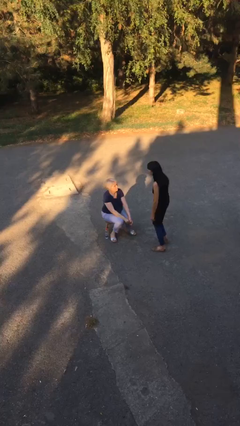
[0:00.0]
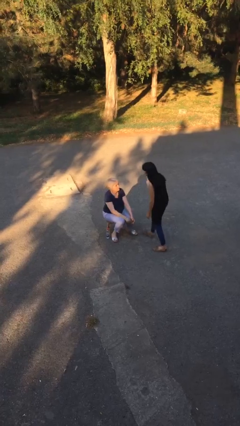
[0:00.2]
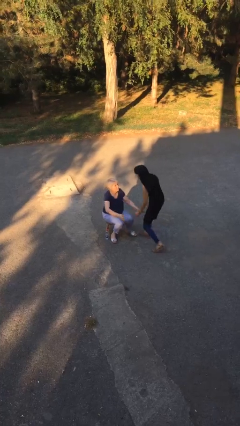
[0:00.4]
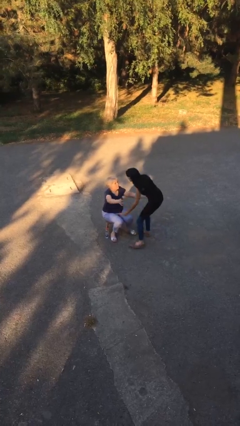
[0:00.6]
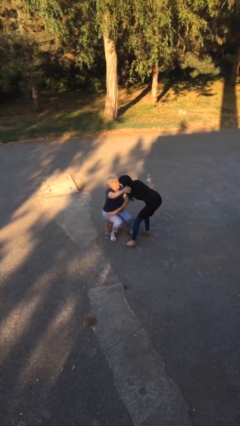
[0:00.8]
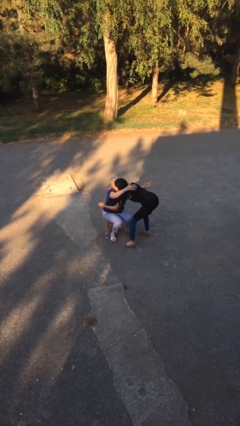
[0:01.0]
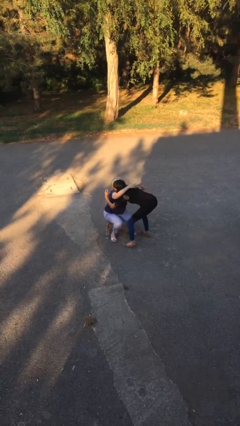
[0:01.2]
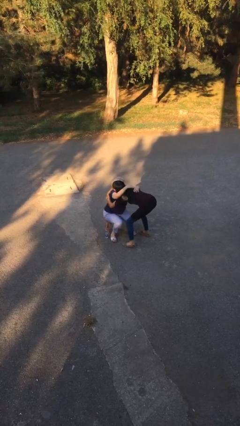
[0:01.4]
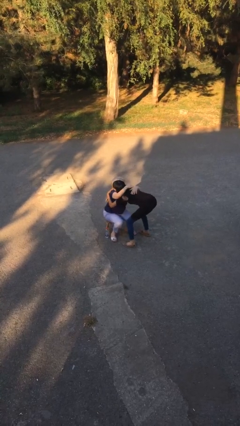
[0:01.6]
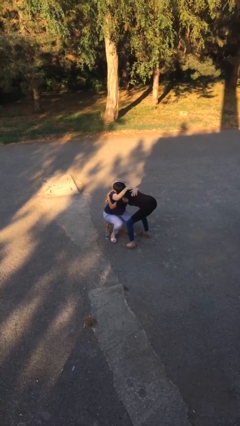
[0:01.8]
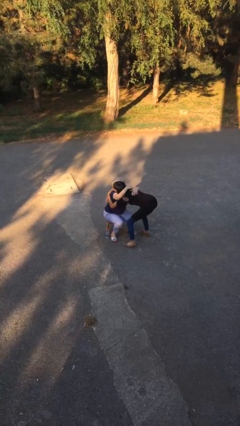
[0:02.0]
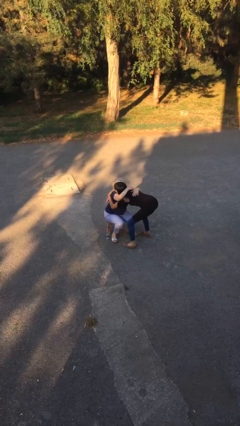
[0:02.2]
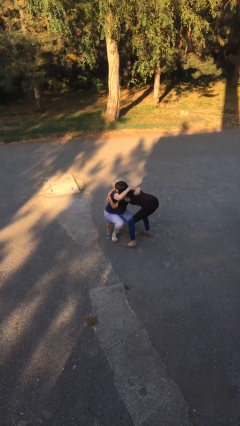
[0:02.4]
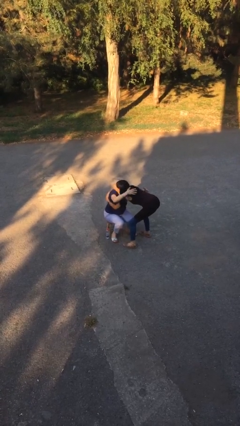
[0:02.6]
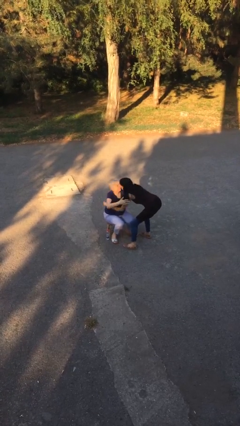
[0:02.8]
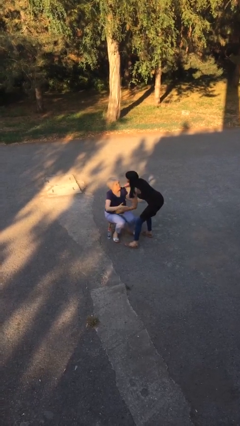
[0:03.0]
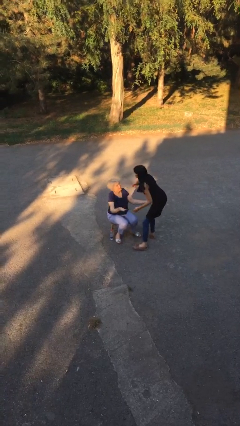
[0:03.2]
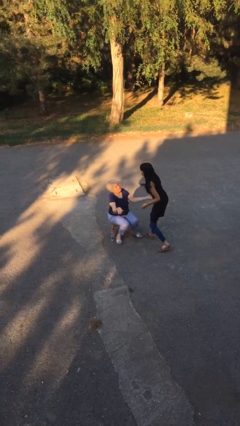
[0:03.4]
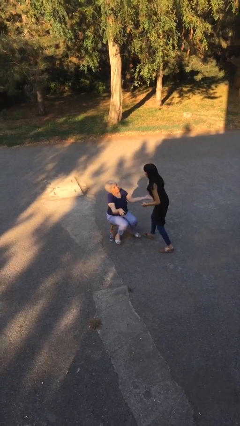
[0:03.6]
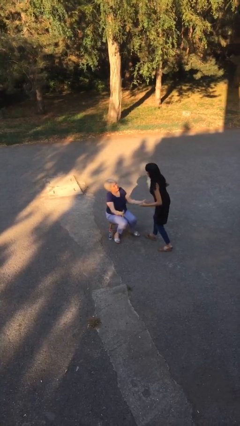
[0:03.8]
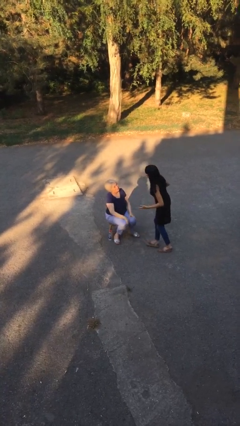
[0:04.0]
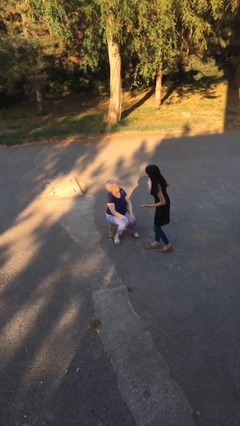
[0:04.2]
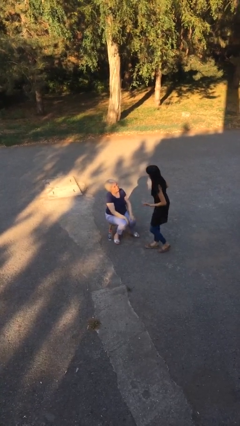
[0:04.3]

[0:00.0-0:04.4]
person embraces person

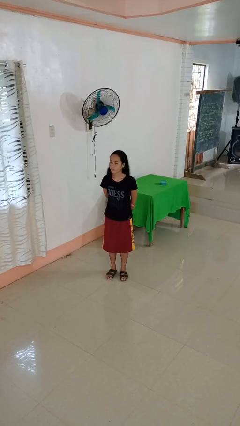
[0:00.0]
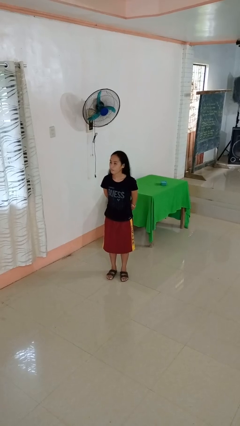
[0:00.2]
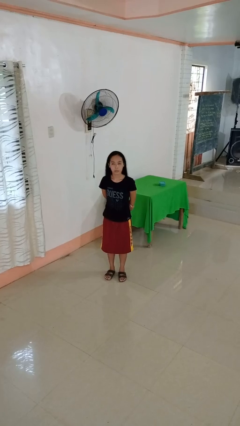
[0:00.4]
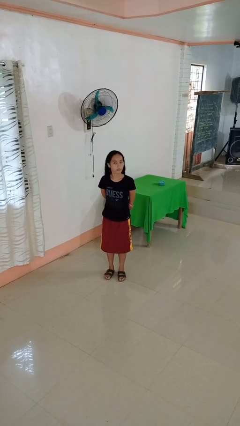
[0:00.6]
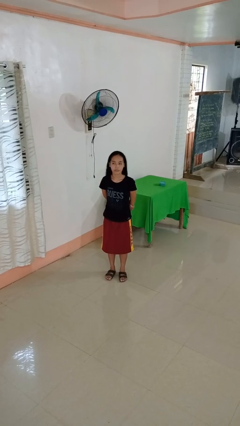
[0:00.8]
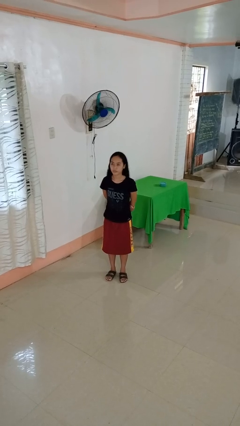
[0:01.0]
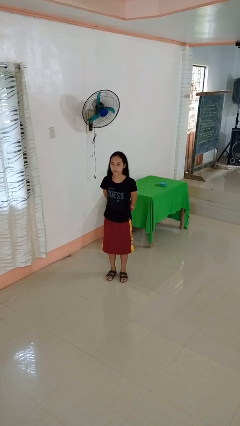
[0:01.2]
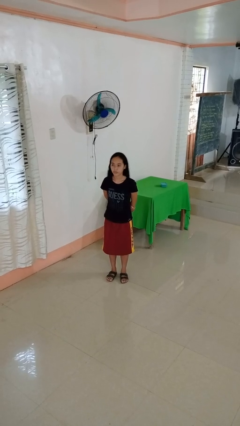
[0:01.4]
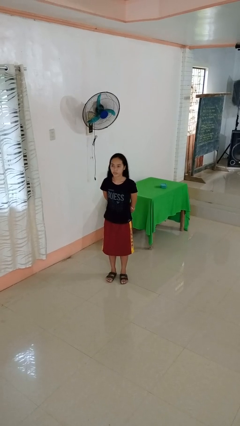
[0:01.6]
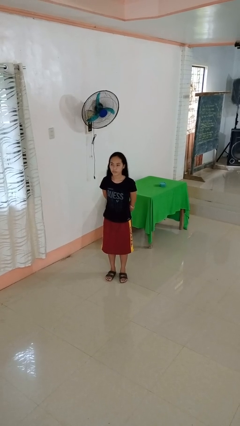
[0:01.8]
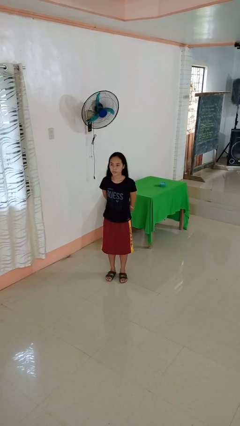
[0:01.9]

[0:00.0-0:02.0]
person shakes head

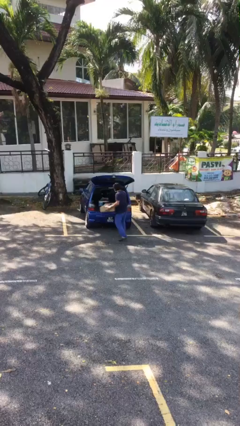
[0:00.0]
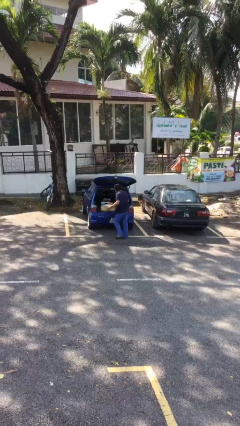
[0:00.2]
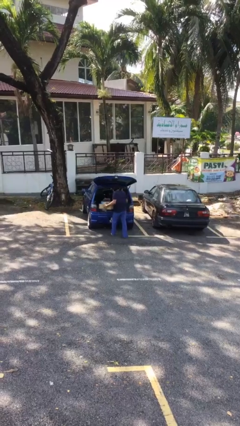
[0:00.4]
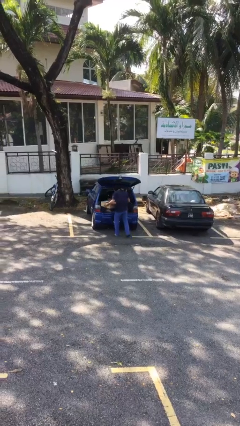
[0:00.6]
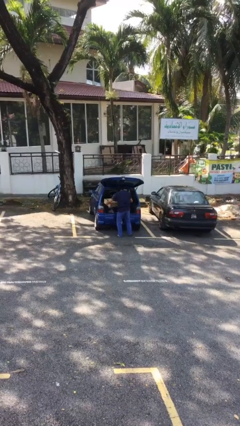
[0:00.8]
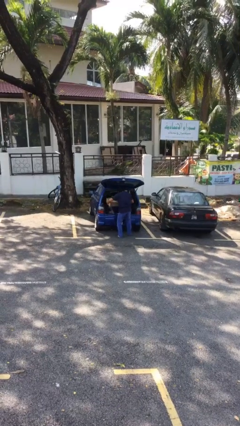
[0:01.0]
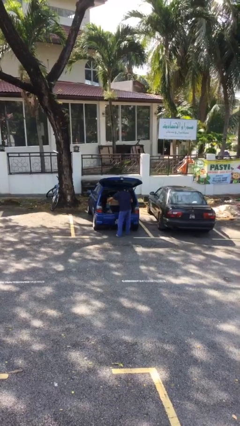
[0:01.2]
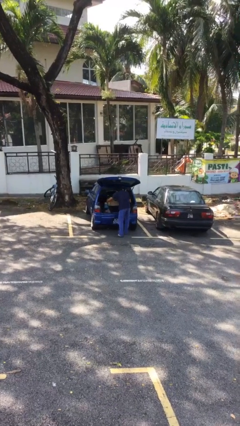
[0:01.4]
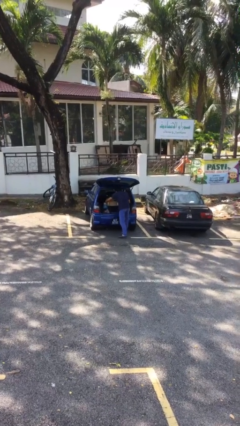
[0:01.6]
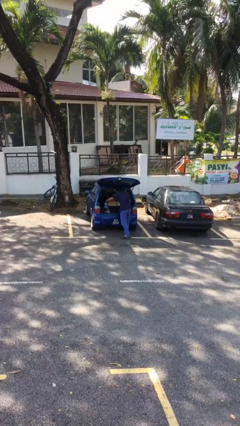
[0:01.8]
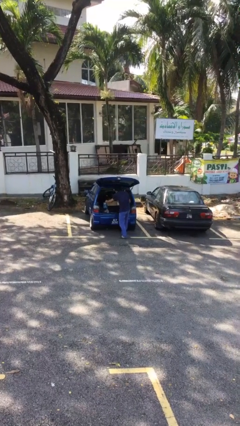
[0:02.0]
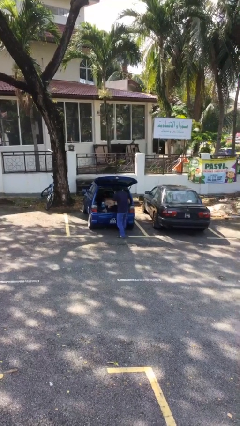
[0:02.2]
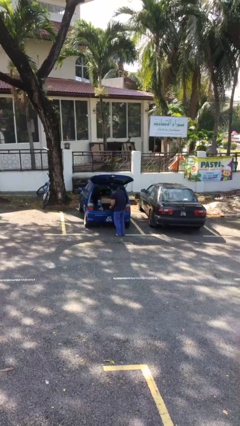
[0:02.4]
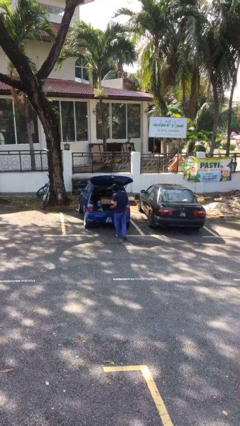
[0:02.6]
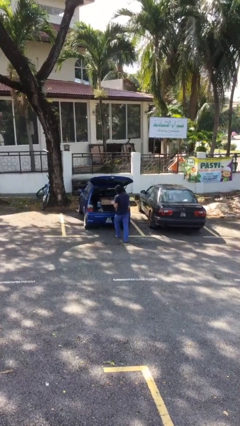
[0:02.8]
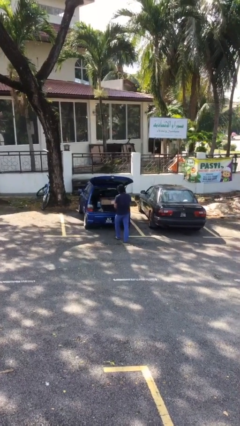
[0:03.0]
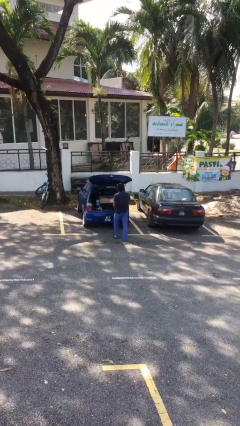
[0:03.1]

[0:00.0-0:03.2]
person loads car

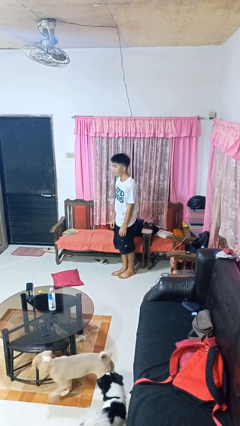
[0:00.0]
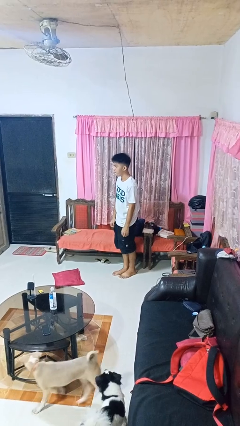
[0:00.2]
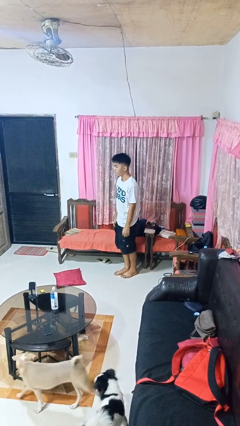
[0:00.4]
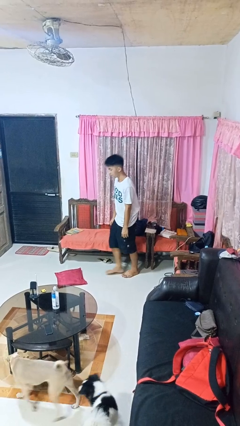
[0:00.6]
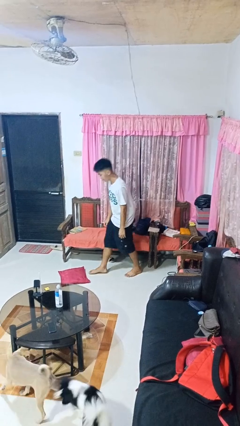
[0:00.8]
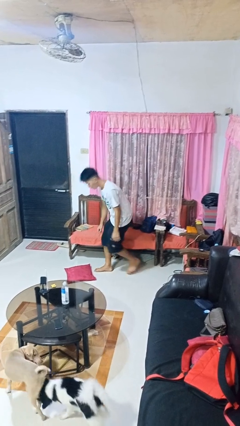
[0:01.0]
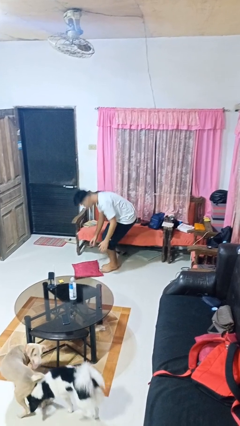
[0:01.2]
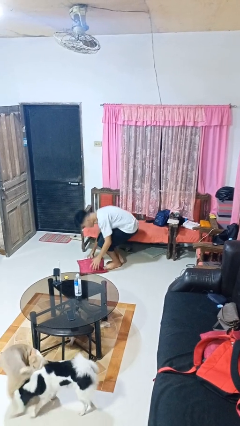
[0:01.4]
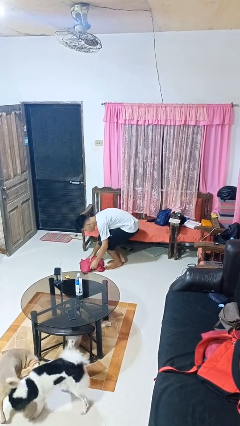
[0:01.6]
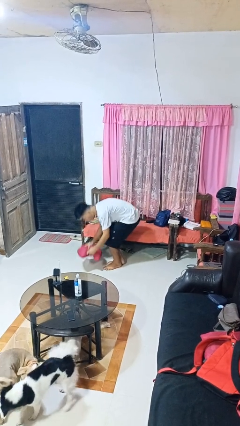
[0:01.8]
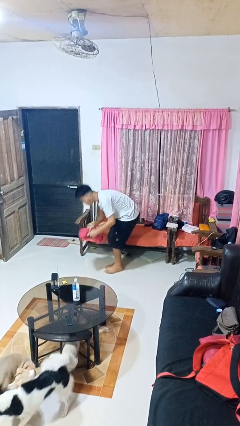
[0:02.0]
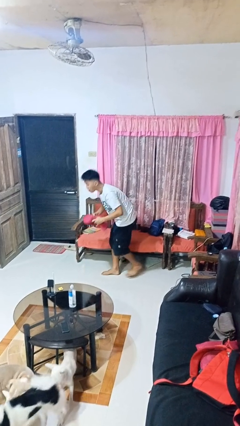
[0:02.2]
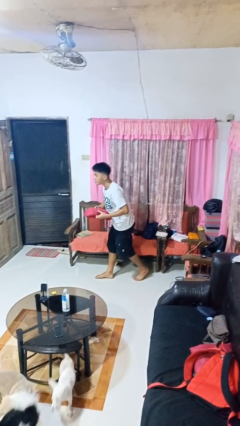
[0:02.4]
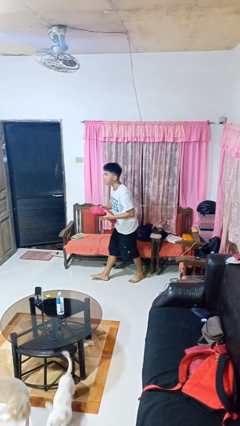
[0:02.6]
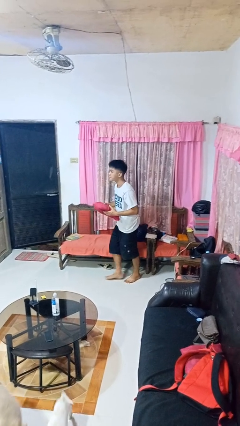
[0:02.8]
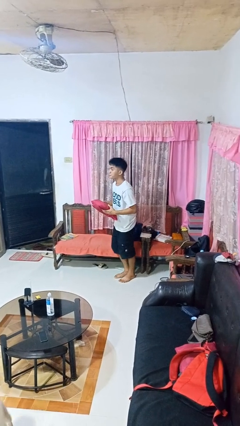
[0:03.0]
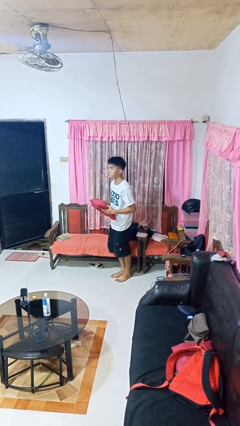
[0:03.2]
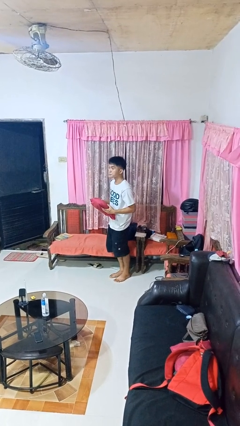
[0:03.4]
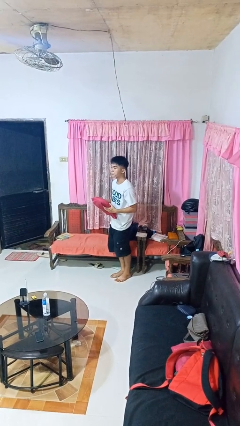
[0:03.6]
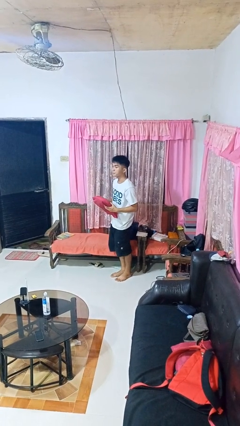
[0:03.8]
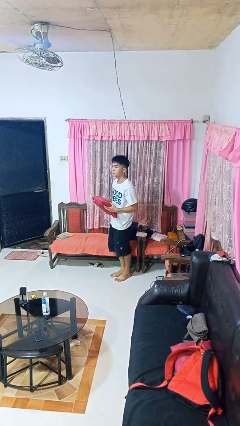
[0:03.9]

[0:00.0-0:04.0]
person picks up object from floor

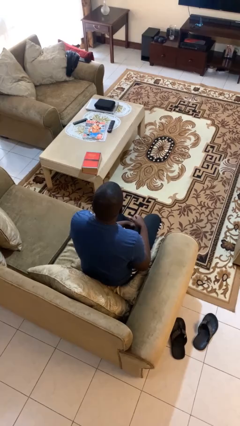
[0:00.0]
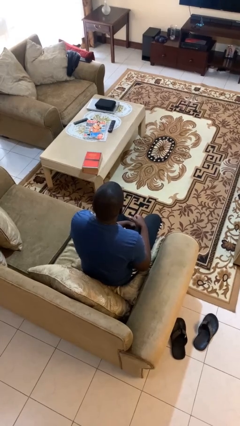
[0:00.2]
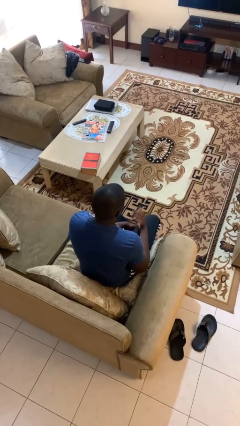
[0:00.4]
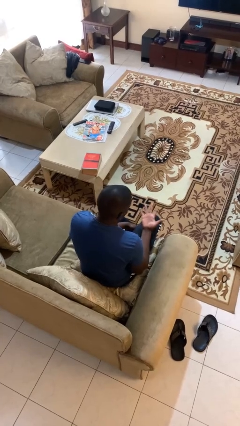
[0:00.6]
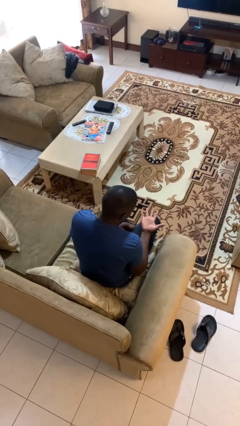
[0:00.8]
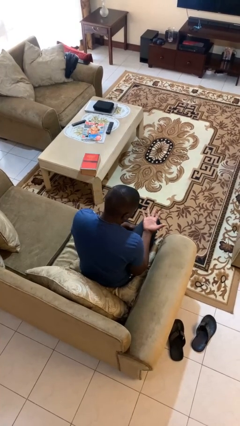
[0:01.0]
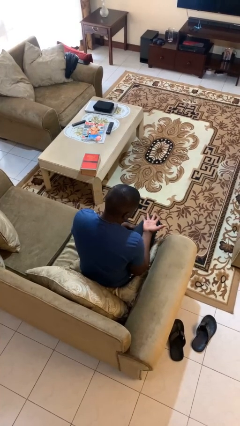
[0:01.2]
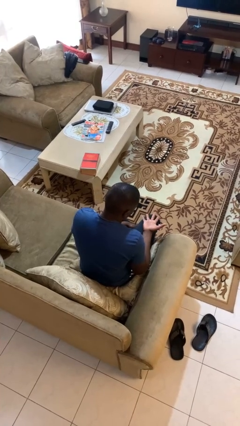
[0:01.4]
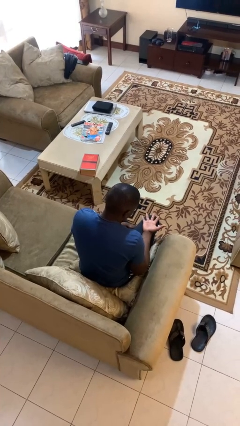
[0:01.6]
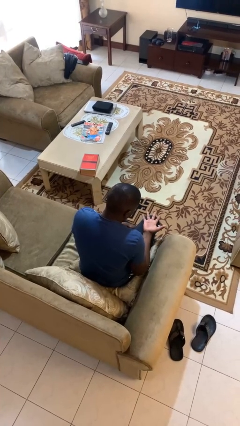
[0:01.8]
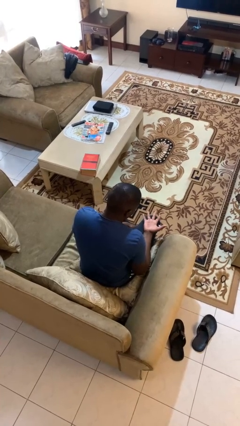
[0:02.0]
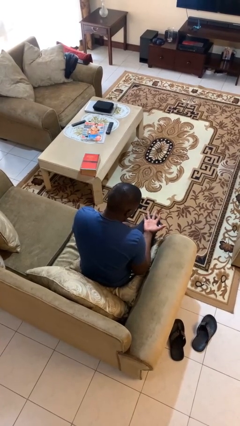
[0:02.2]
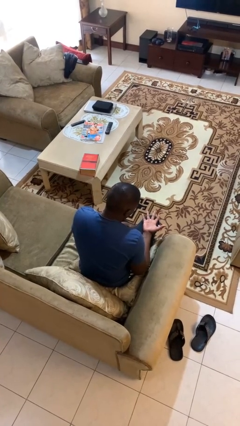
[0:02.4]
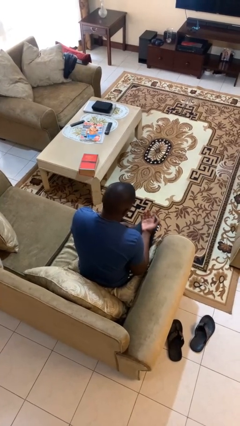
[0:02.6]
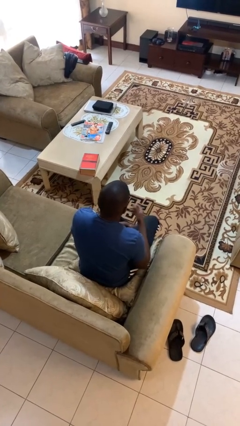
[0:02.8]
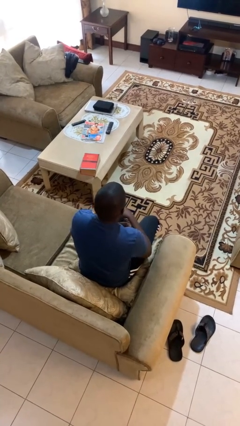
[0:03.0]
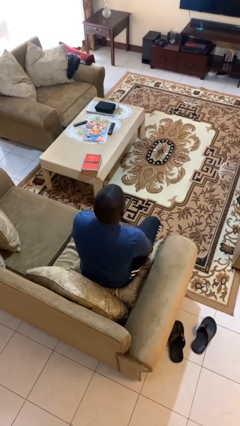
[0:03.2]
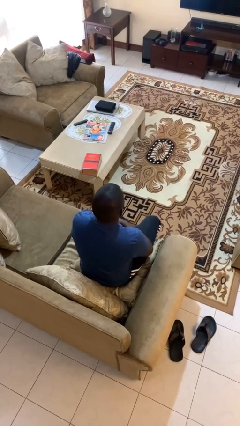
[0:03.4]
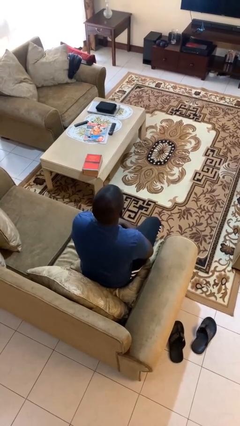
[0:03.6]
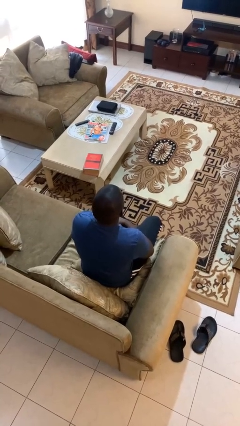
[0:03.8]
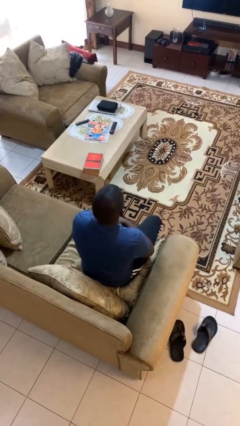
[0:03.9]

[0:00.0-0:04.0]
person looks at hands in lap

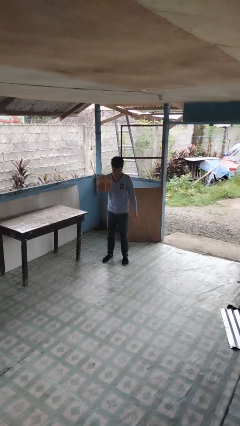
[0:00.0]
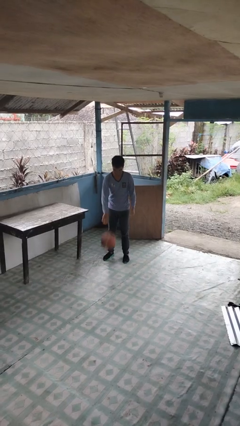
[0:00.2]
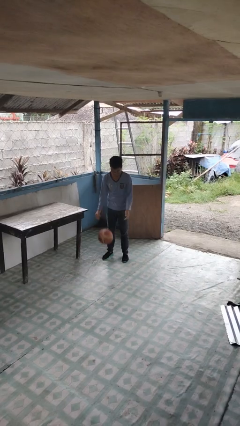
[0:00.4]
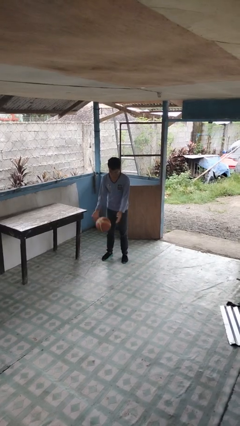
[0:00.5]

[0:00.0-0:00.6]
person bounces ball on floor
